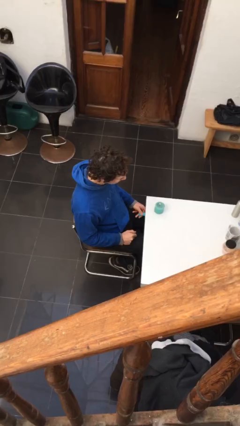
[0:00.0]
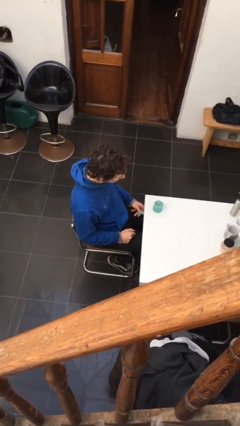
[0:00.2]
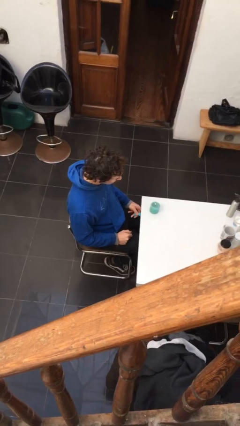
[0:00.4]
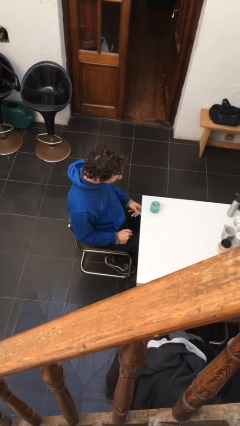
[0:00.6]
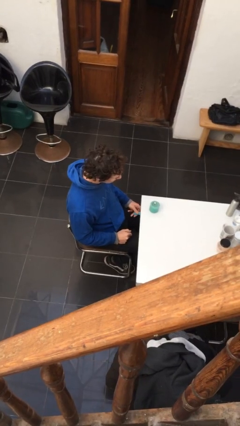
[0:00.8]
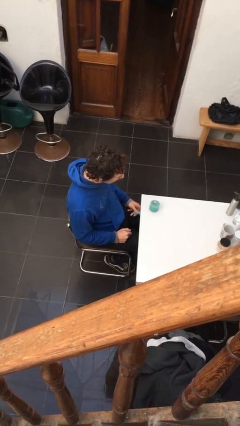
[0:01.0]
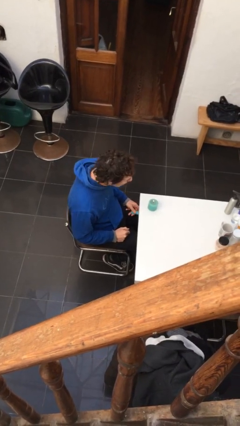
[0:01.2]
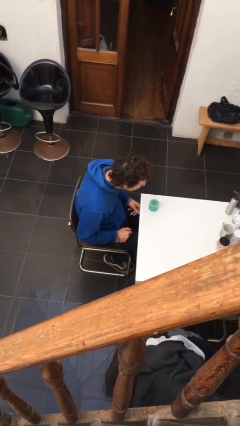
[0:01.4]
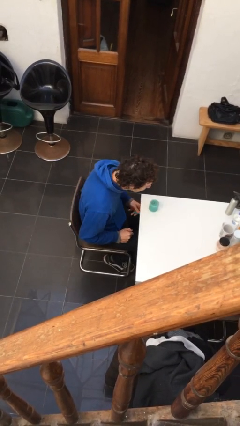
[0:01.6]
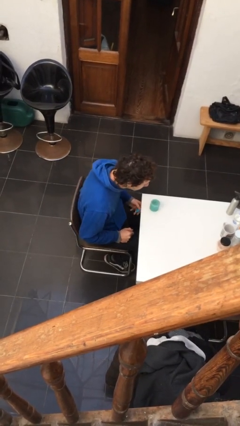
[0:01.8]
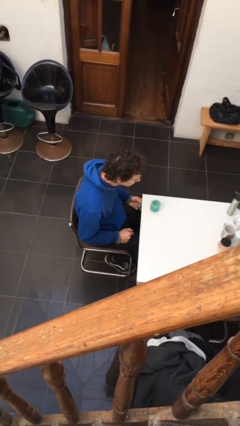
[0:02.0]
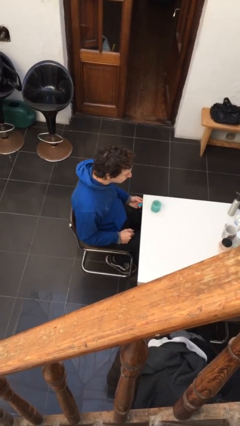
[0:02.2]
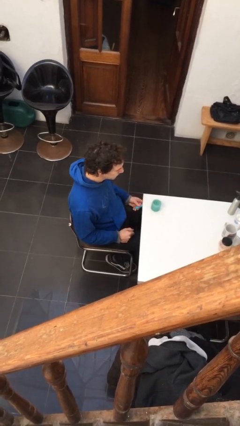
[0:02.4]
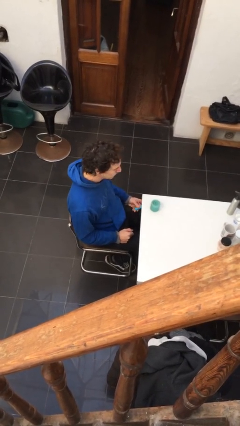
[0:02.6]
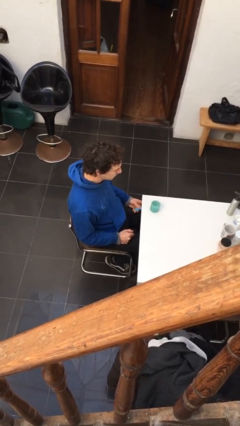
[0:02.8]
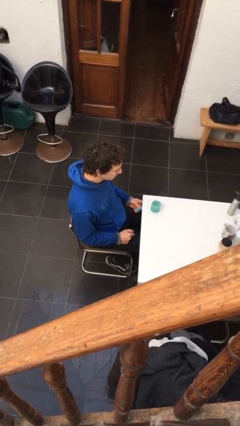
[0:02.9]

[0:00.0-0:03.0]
person extinguishes candle

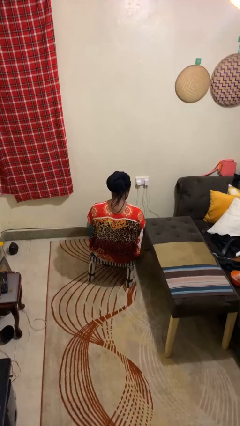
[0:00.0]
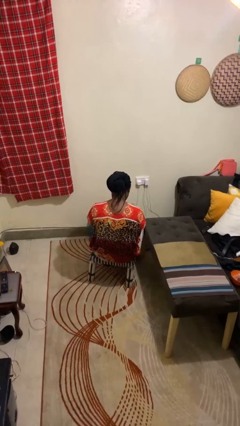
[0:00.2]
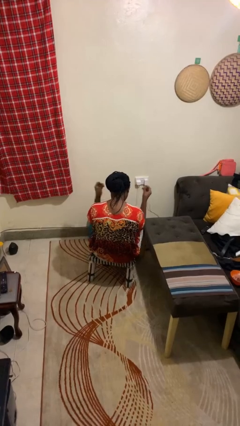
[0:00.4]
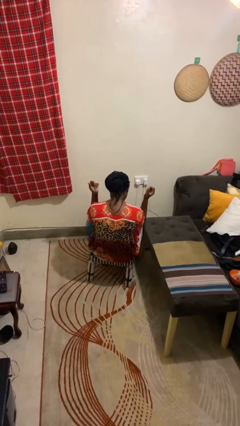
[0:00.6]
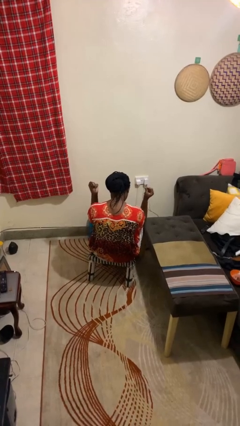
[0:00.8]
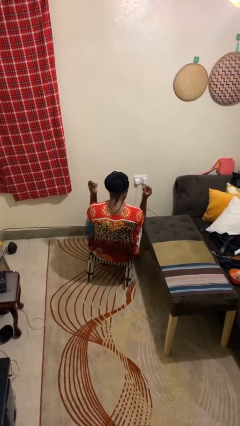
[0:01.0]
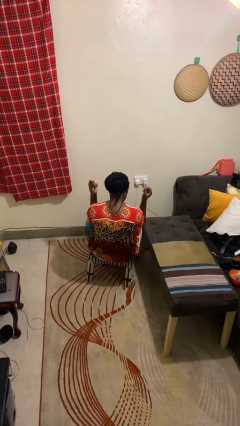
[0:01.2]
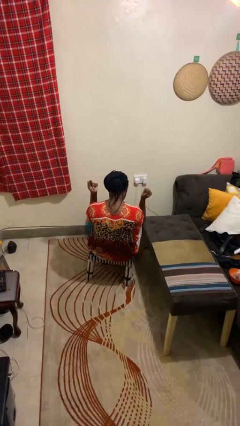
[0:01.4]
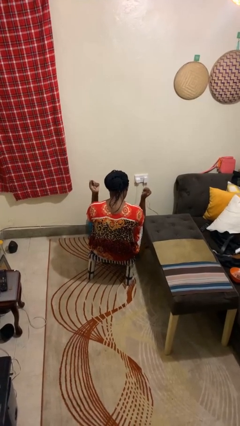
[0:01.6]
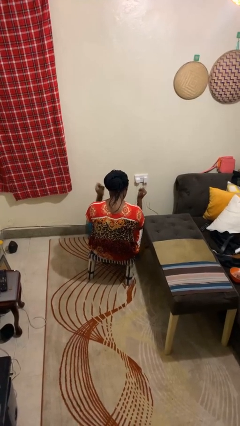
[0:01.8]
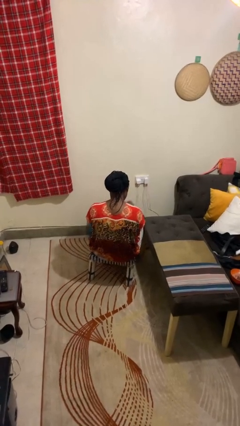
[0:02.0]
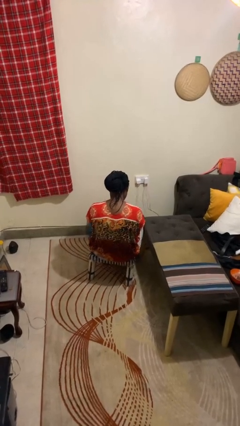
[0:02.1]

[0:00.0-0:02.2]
person snaps fingers

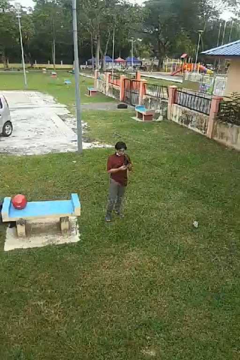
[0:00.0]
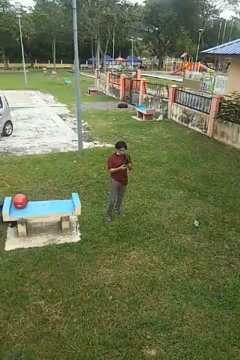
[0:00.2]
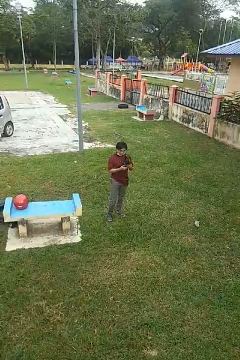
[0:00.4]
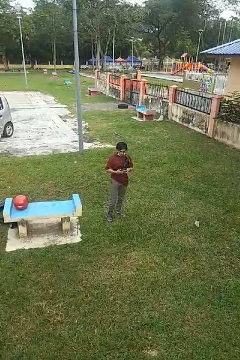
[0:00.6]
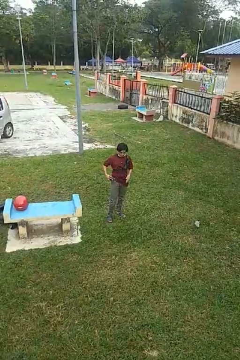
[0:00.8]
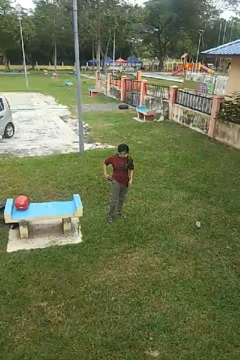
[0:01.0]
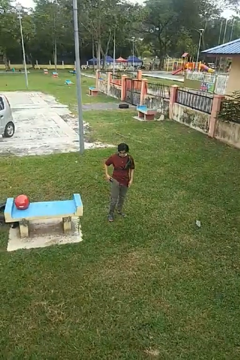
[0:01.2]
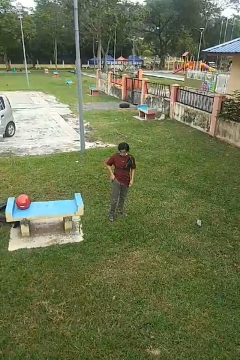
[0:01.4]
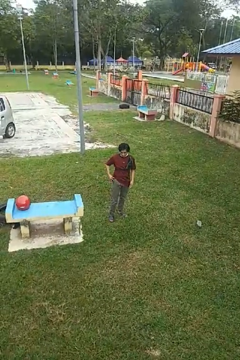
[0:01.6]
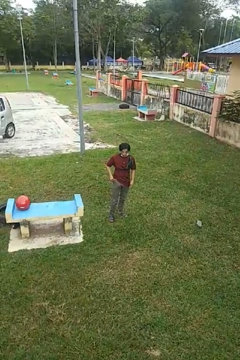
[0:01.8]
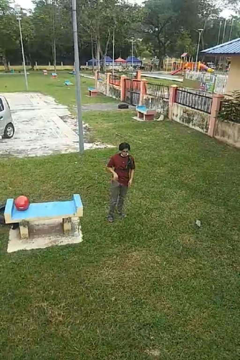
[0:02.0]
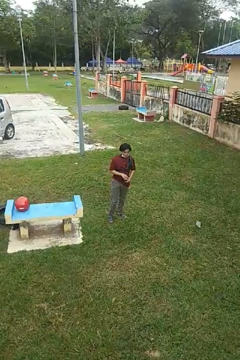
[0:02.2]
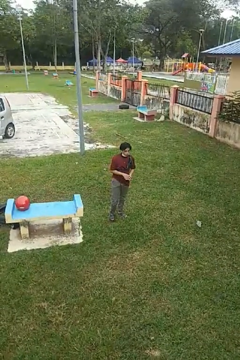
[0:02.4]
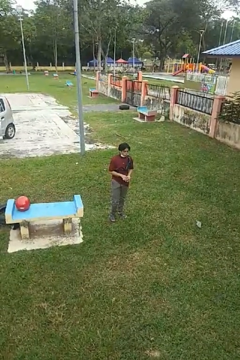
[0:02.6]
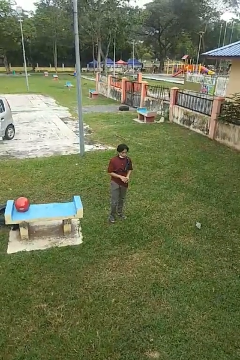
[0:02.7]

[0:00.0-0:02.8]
person puts phone into pocket

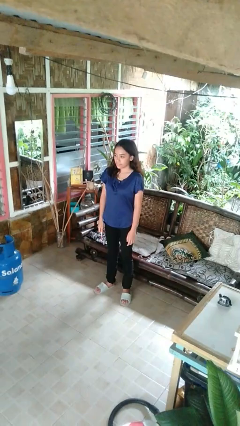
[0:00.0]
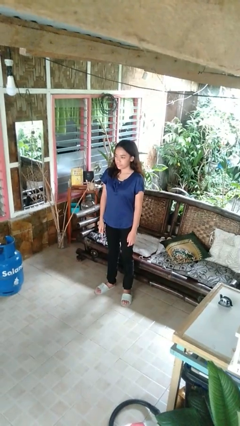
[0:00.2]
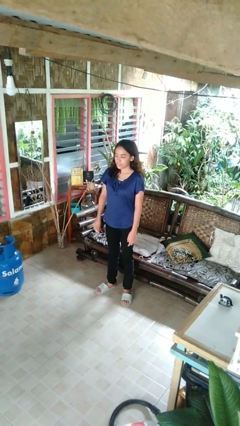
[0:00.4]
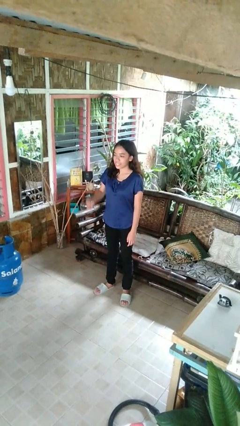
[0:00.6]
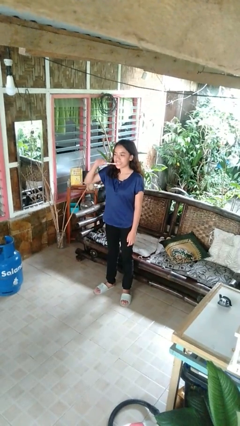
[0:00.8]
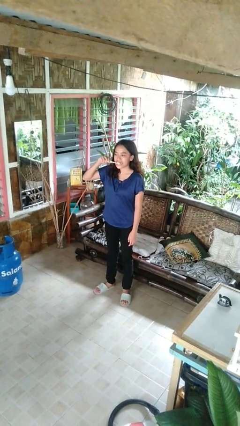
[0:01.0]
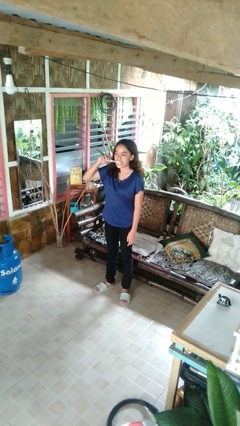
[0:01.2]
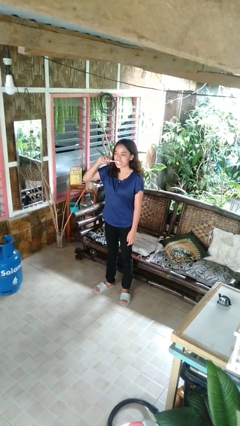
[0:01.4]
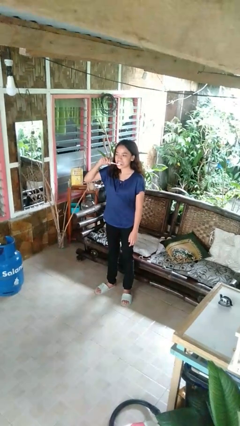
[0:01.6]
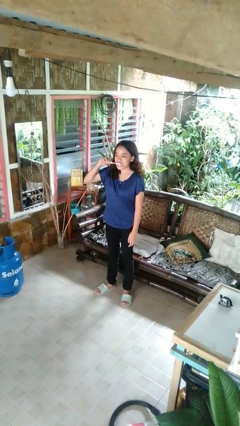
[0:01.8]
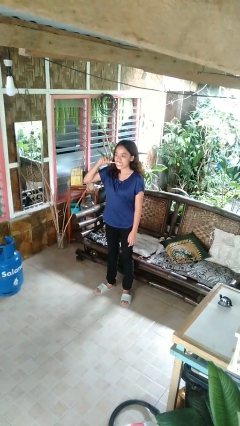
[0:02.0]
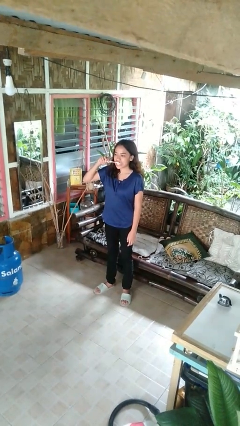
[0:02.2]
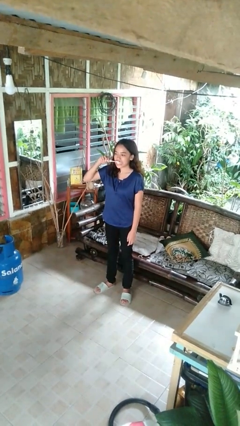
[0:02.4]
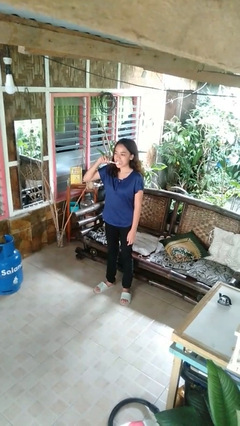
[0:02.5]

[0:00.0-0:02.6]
person brushes teeth

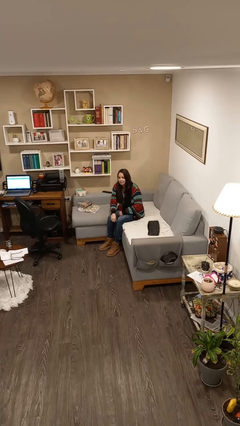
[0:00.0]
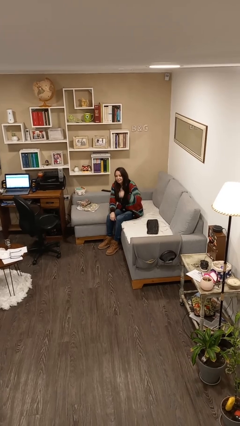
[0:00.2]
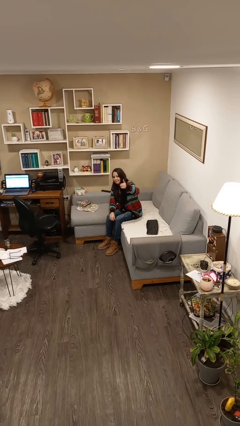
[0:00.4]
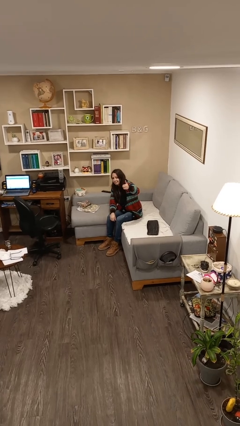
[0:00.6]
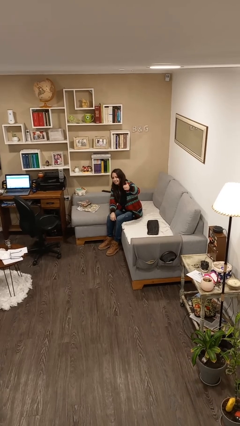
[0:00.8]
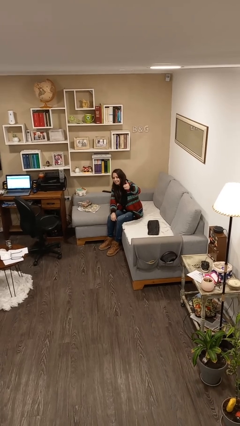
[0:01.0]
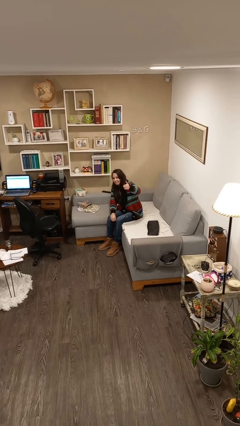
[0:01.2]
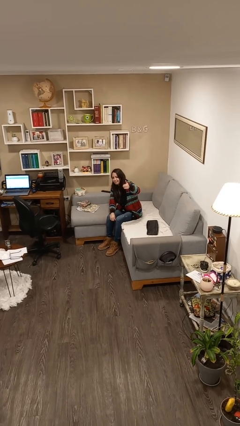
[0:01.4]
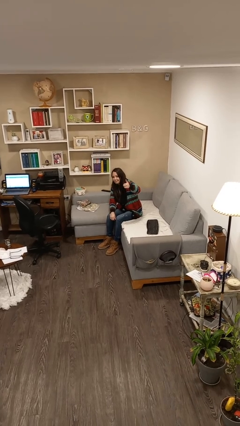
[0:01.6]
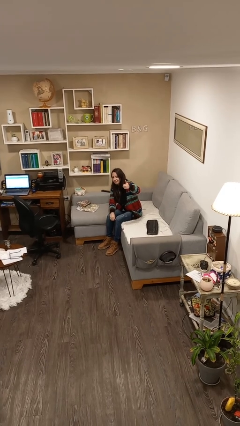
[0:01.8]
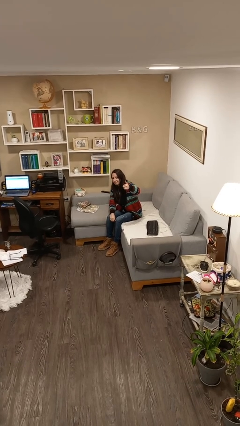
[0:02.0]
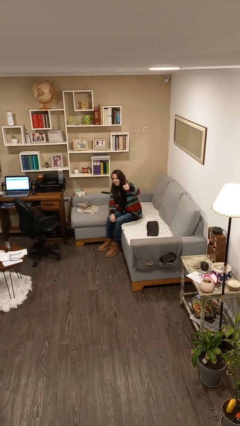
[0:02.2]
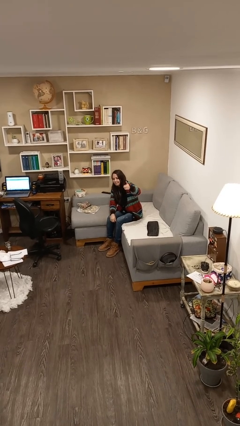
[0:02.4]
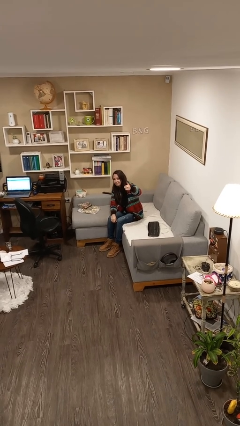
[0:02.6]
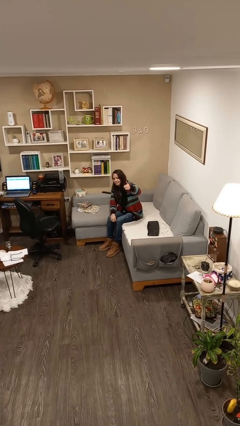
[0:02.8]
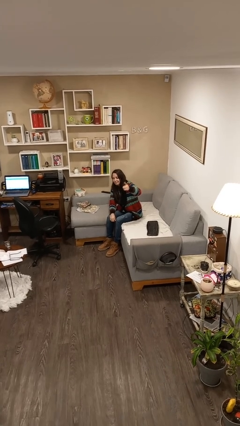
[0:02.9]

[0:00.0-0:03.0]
person gestures thumbs up

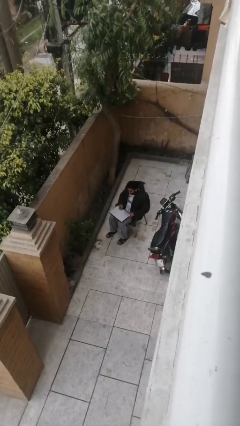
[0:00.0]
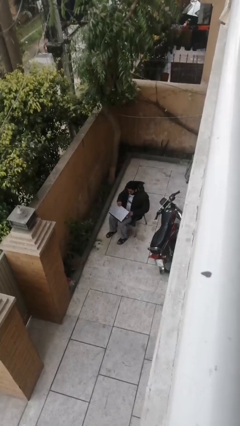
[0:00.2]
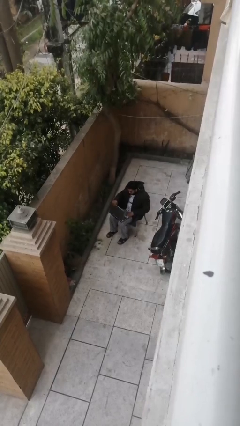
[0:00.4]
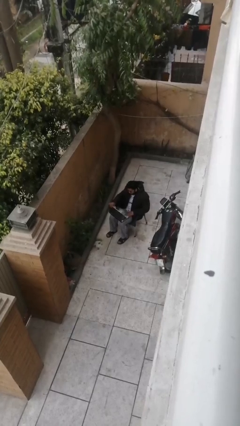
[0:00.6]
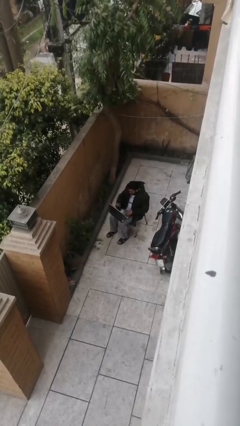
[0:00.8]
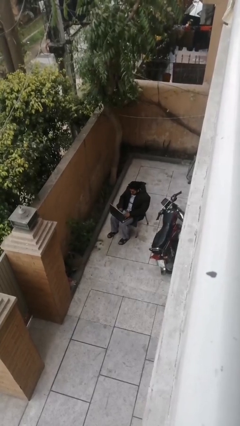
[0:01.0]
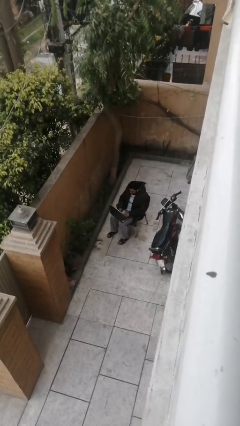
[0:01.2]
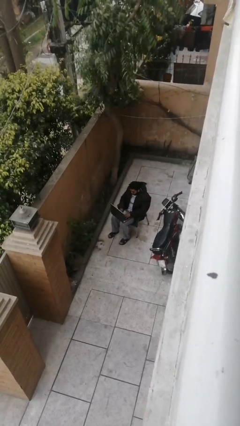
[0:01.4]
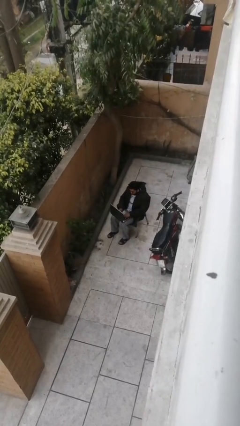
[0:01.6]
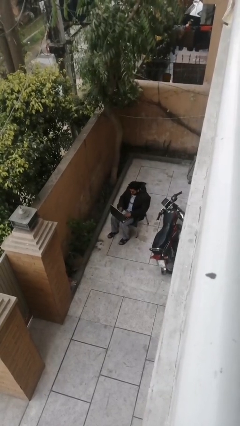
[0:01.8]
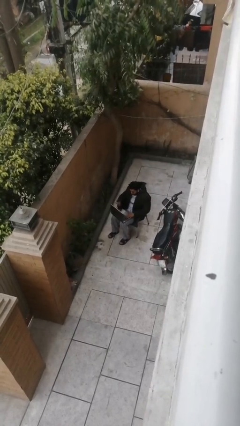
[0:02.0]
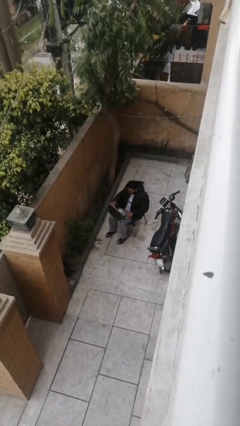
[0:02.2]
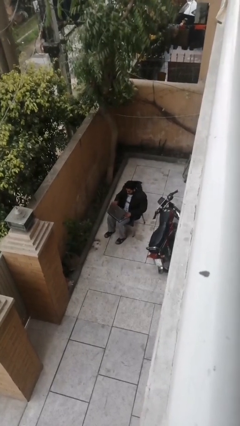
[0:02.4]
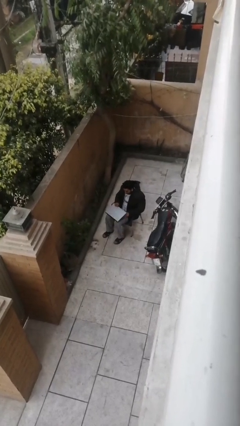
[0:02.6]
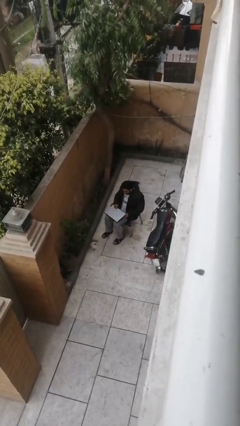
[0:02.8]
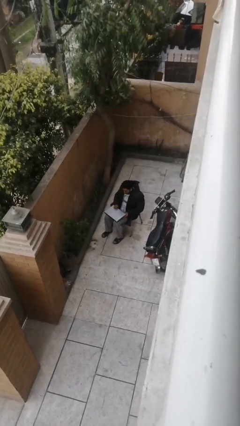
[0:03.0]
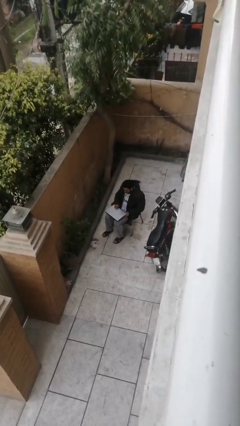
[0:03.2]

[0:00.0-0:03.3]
person interacts with laptop

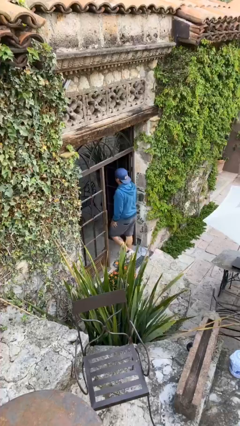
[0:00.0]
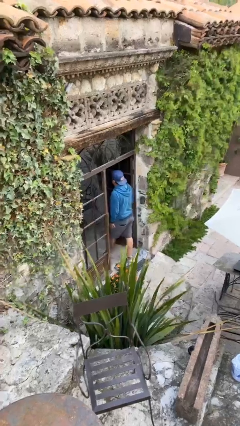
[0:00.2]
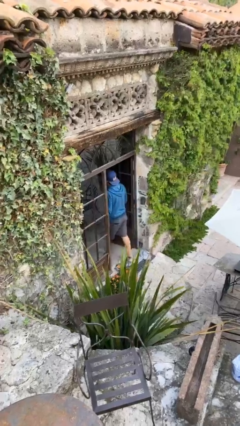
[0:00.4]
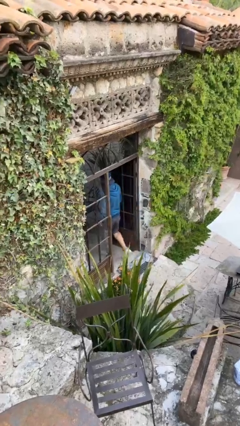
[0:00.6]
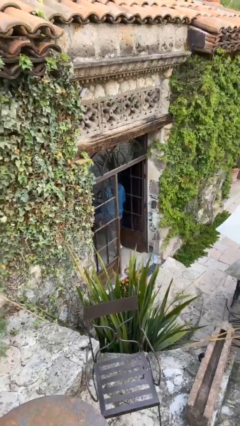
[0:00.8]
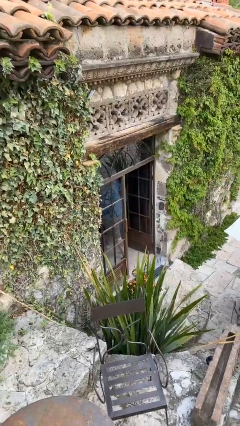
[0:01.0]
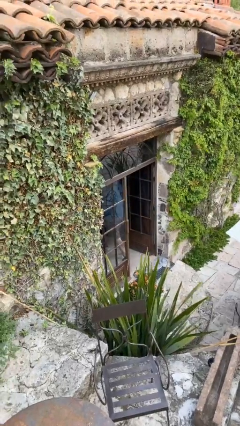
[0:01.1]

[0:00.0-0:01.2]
person exits scene through structure
